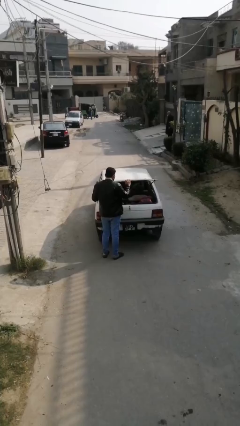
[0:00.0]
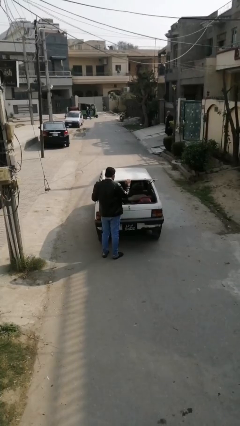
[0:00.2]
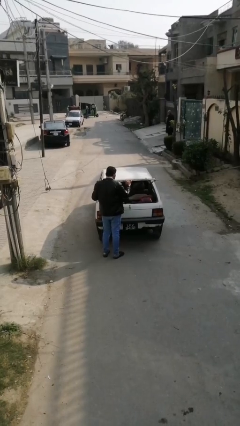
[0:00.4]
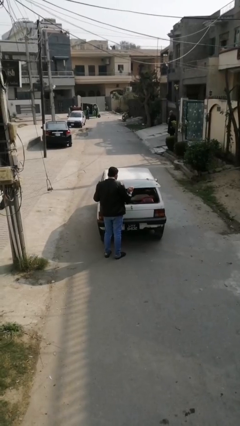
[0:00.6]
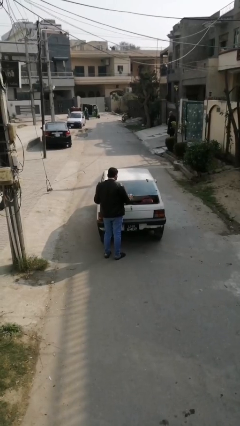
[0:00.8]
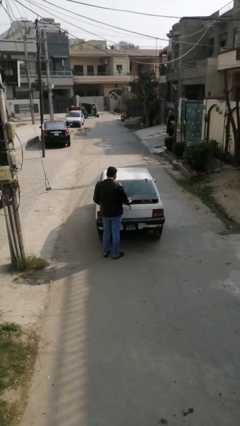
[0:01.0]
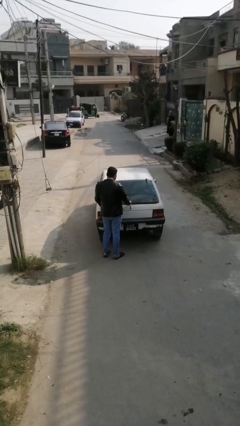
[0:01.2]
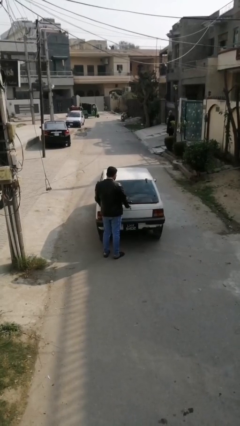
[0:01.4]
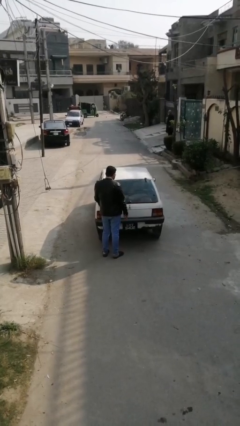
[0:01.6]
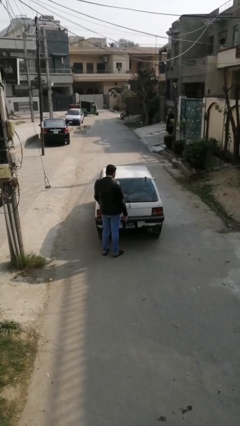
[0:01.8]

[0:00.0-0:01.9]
person closes car trunk

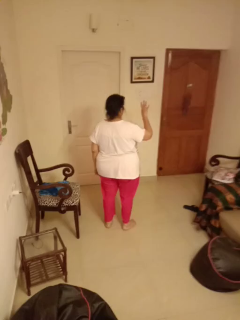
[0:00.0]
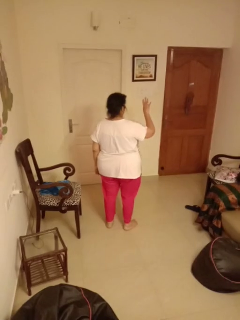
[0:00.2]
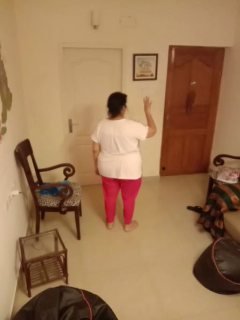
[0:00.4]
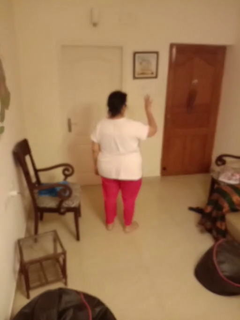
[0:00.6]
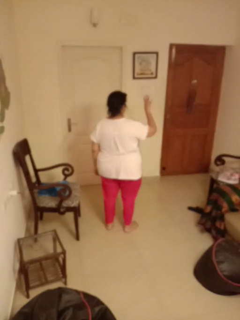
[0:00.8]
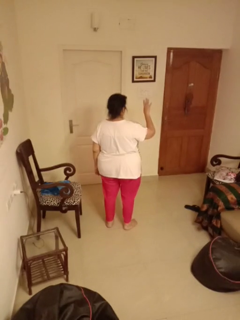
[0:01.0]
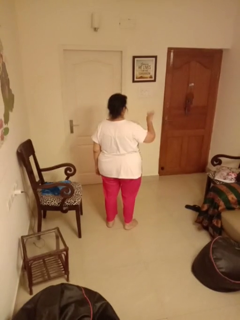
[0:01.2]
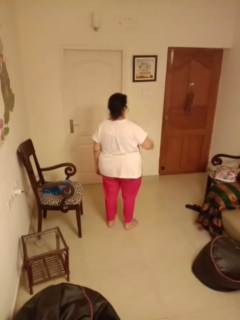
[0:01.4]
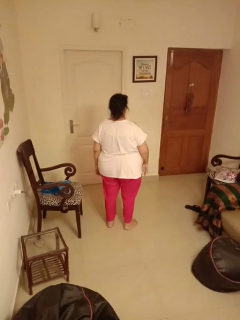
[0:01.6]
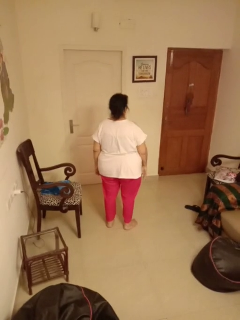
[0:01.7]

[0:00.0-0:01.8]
person gestures number four

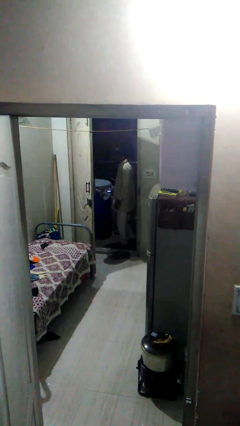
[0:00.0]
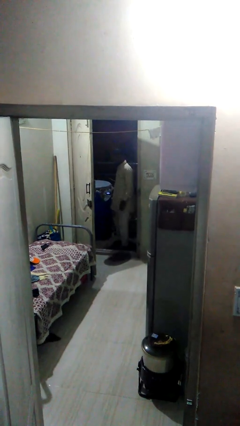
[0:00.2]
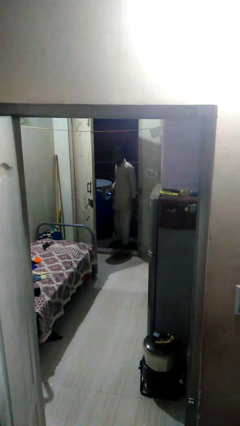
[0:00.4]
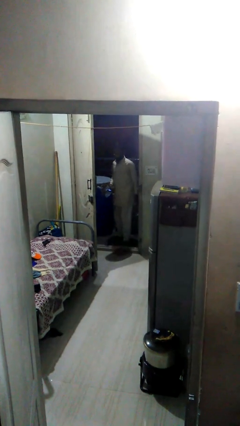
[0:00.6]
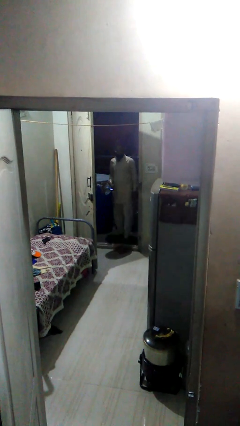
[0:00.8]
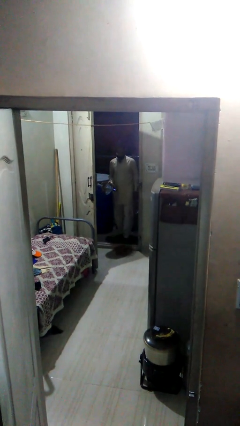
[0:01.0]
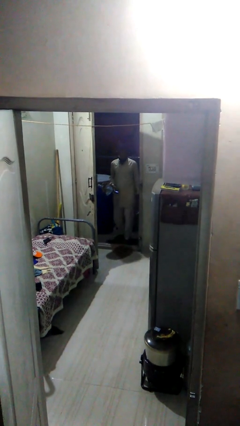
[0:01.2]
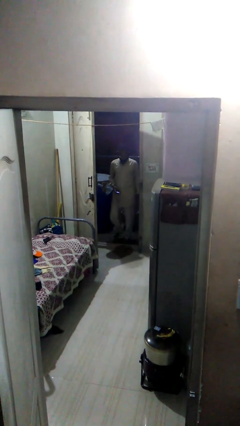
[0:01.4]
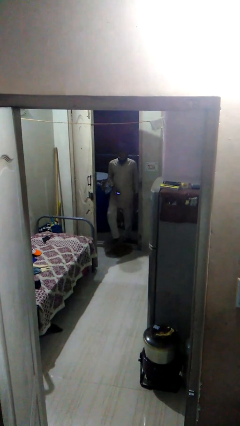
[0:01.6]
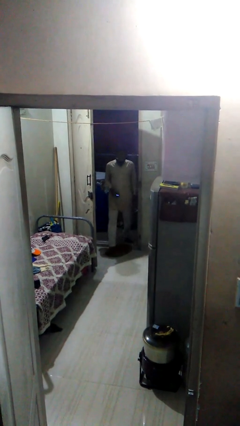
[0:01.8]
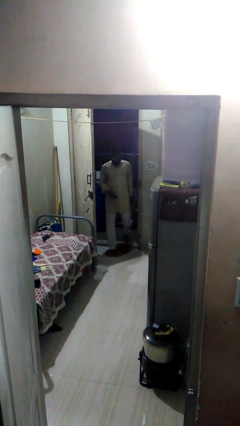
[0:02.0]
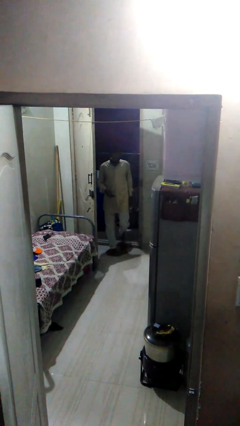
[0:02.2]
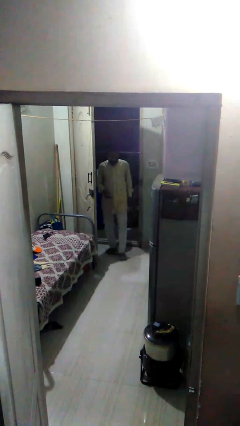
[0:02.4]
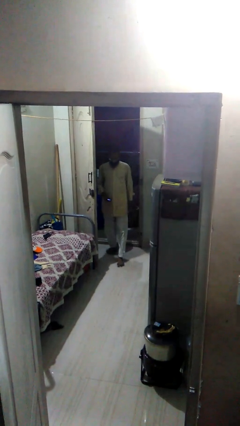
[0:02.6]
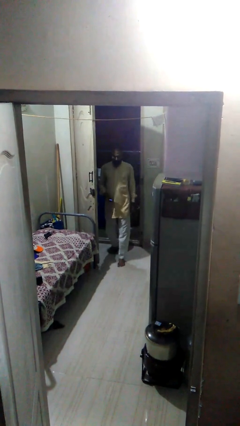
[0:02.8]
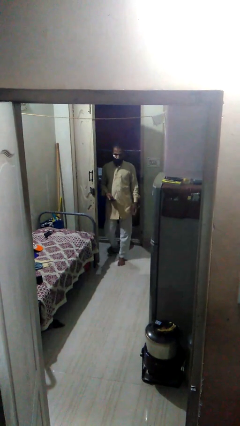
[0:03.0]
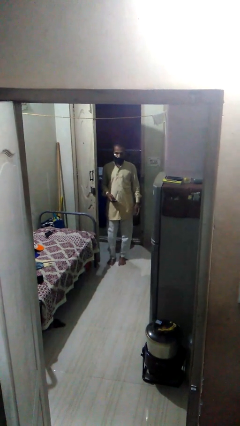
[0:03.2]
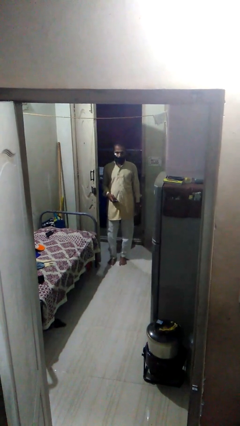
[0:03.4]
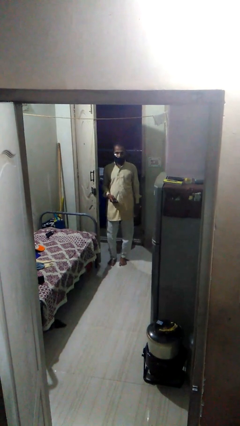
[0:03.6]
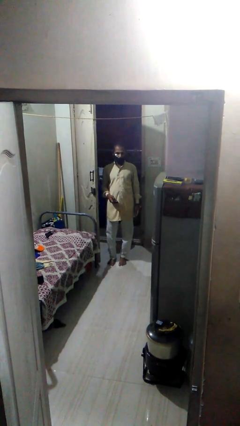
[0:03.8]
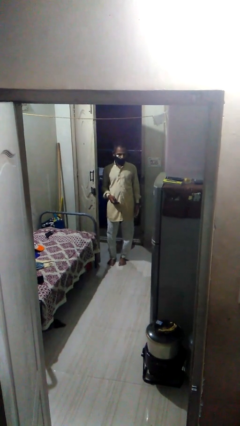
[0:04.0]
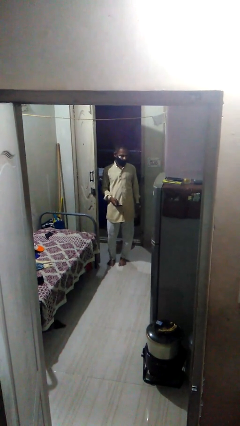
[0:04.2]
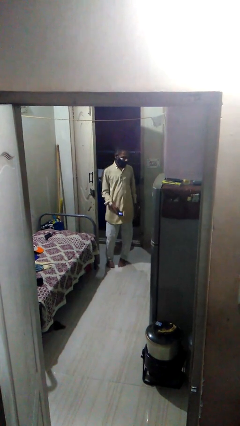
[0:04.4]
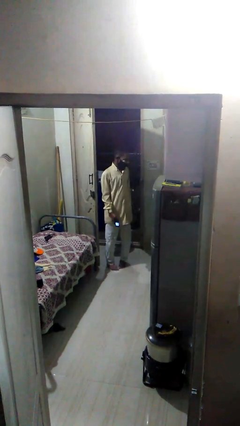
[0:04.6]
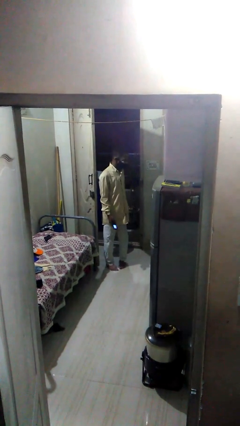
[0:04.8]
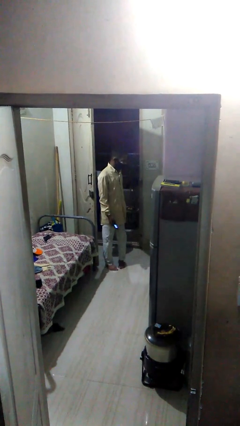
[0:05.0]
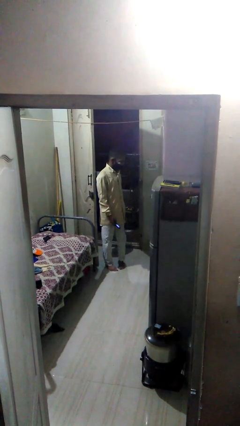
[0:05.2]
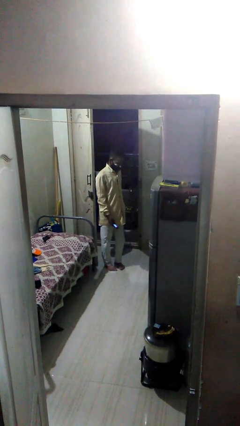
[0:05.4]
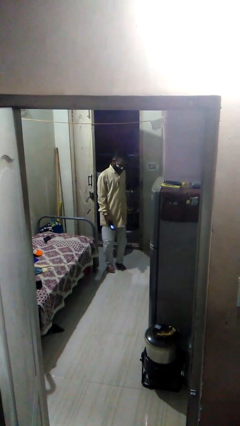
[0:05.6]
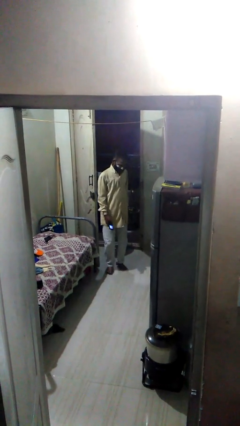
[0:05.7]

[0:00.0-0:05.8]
person enters scene through structure

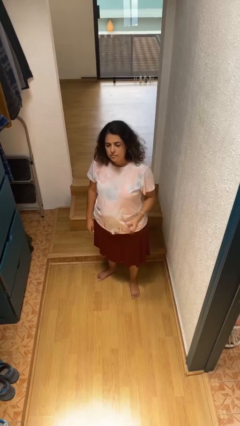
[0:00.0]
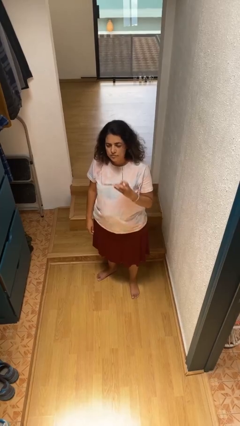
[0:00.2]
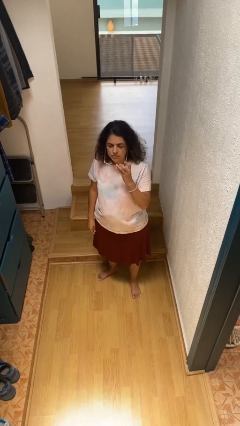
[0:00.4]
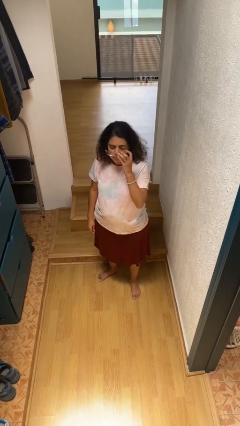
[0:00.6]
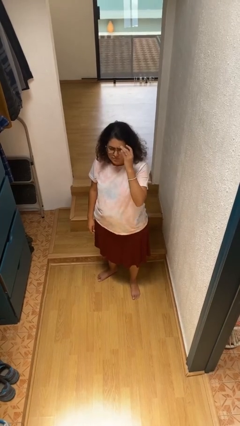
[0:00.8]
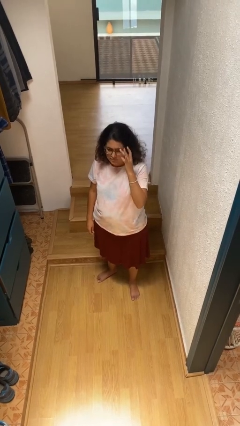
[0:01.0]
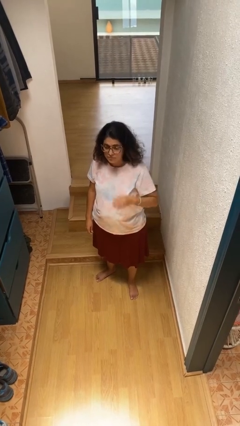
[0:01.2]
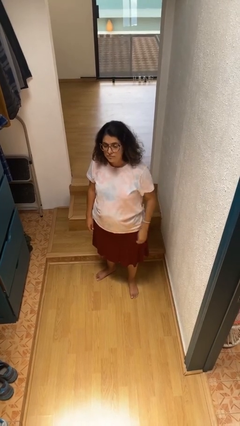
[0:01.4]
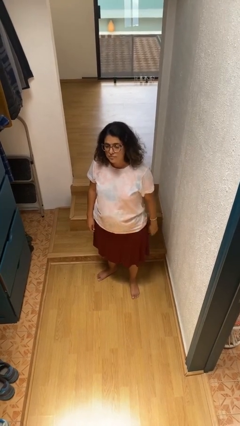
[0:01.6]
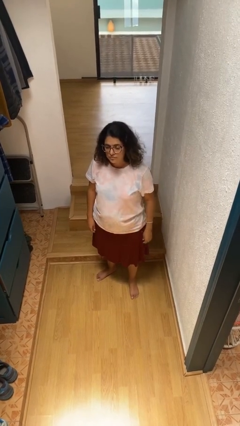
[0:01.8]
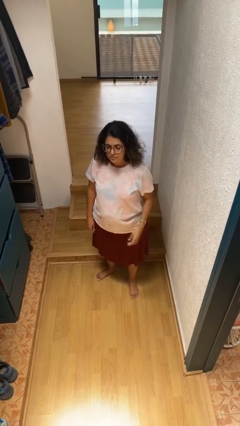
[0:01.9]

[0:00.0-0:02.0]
person puts on glasses

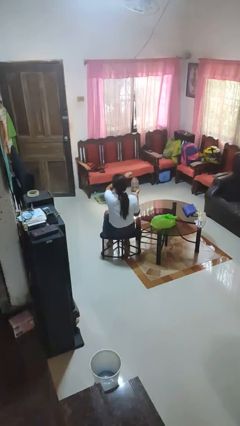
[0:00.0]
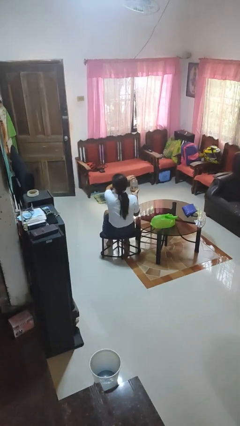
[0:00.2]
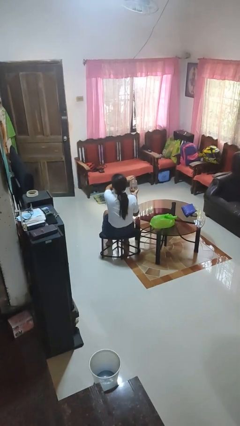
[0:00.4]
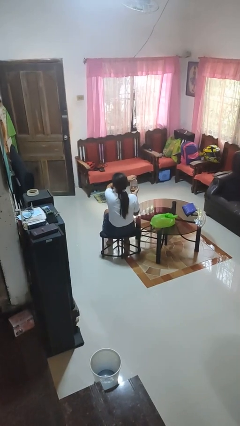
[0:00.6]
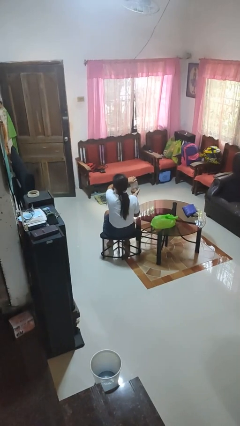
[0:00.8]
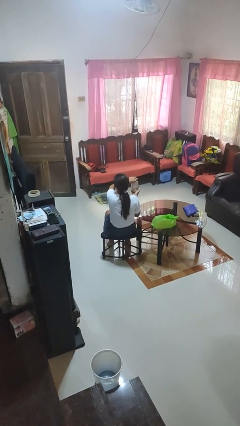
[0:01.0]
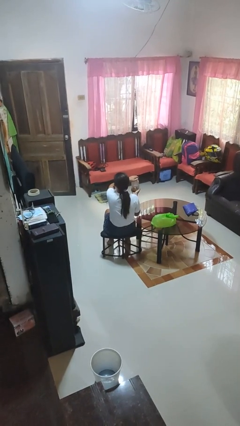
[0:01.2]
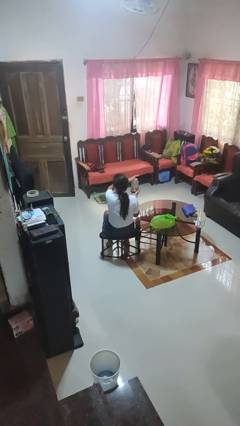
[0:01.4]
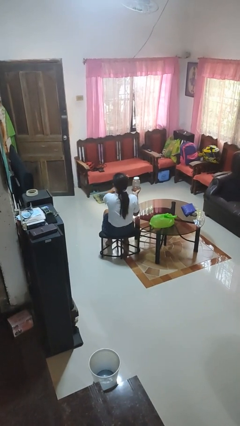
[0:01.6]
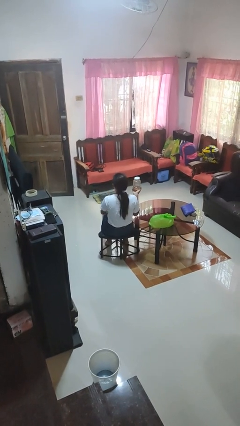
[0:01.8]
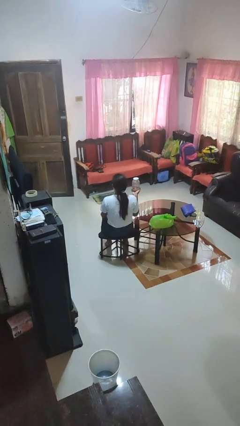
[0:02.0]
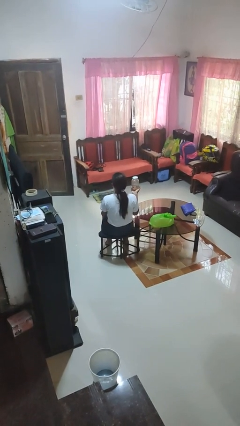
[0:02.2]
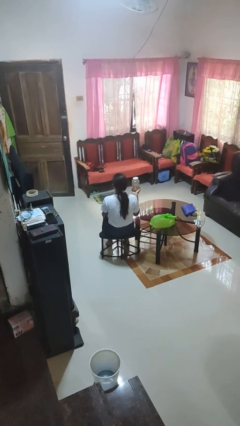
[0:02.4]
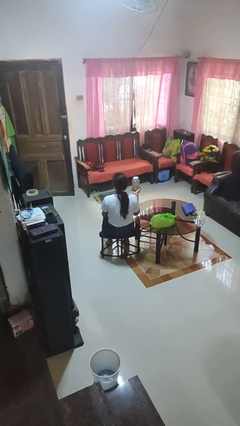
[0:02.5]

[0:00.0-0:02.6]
person closes jar

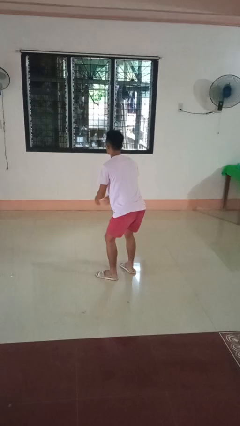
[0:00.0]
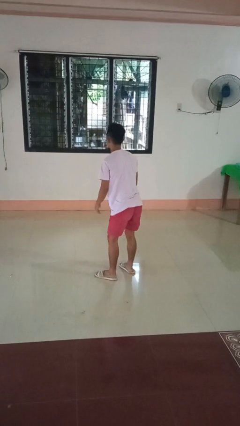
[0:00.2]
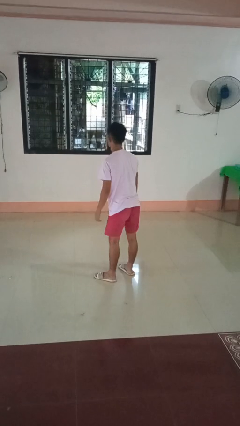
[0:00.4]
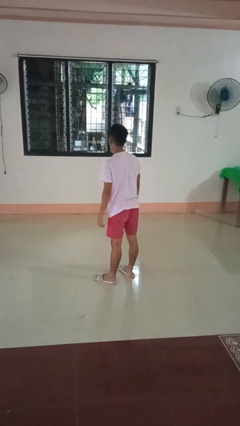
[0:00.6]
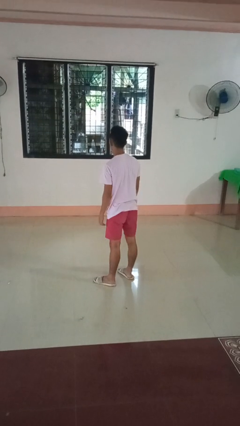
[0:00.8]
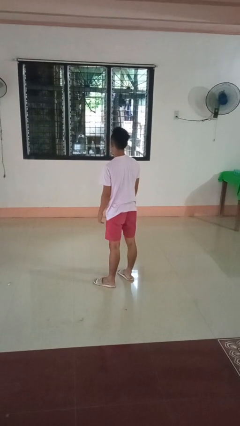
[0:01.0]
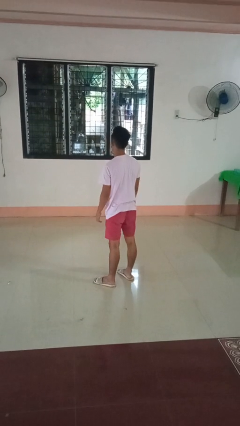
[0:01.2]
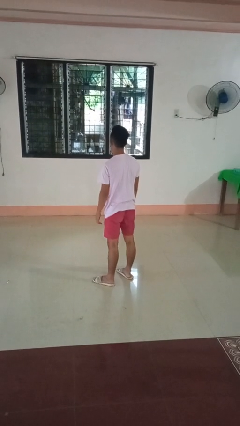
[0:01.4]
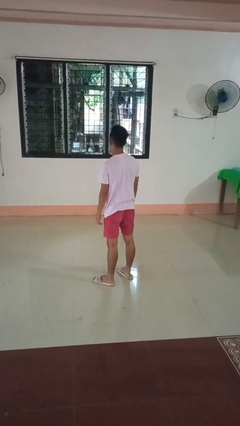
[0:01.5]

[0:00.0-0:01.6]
person stands up

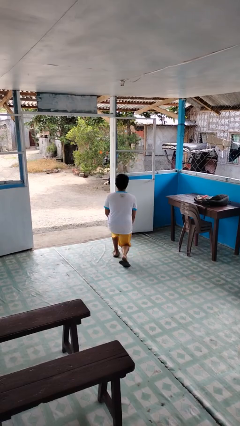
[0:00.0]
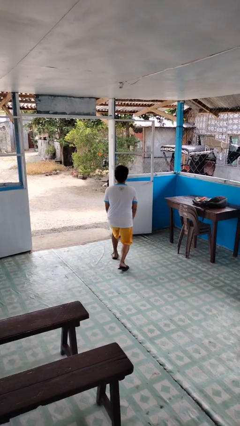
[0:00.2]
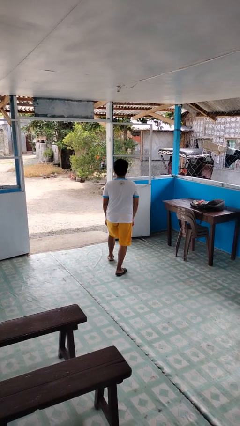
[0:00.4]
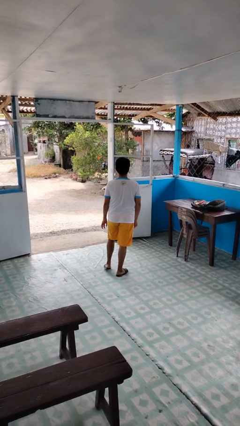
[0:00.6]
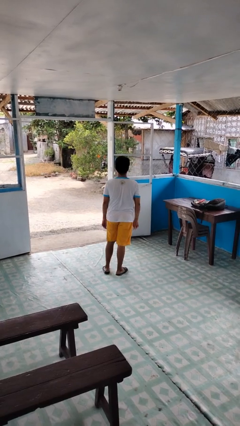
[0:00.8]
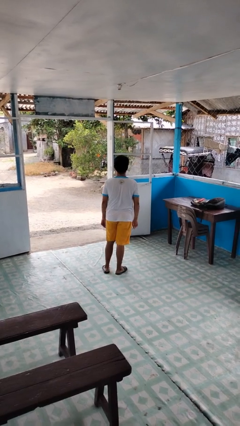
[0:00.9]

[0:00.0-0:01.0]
person stands up from floor

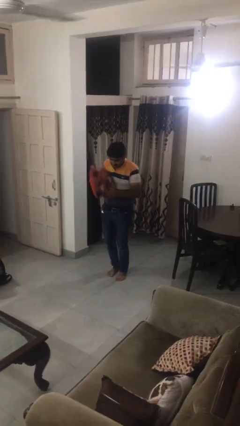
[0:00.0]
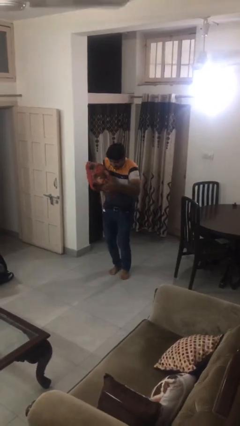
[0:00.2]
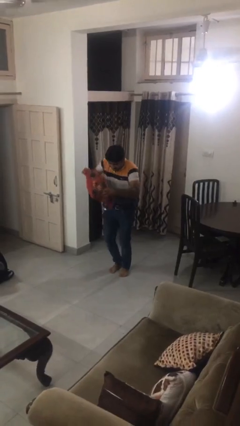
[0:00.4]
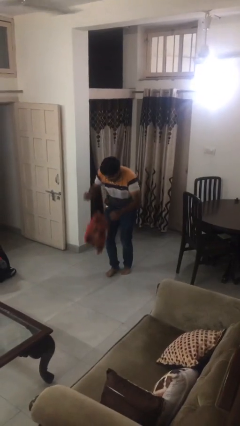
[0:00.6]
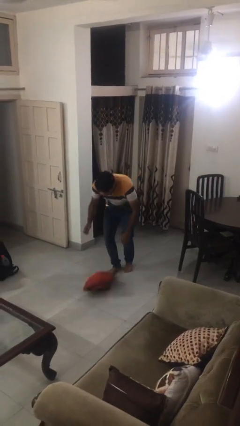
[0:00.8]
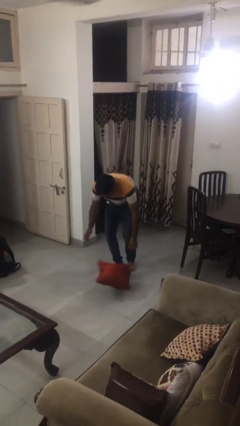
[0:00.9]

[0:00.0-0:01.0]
person drops object

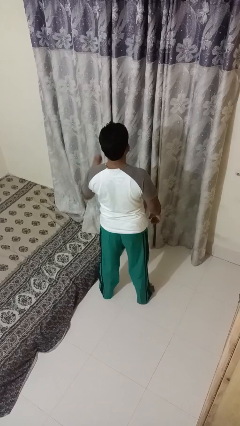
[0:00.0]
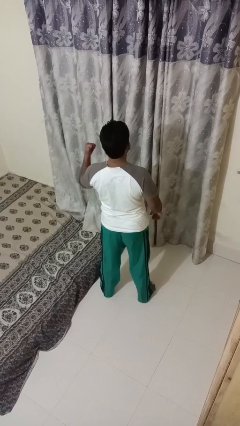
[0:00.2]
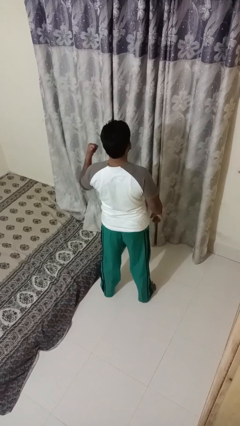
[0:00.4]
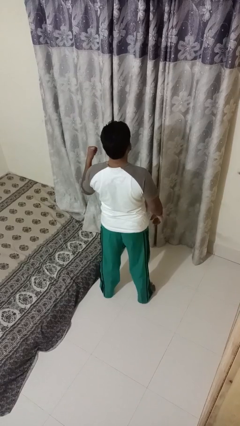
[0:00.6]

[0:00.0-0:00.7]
person gestures behind me
